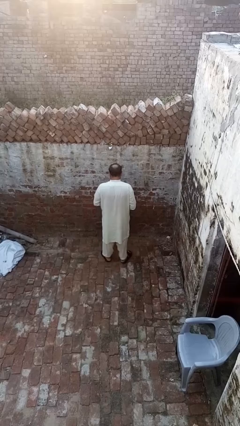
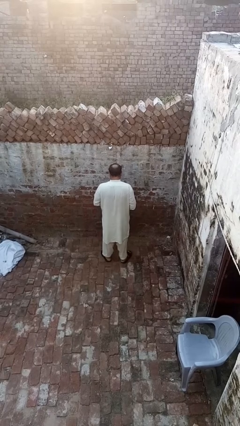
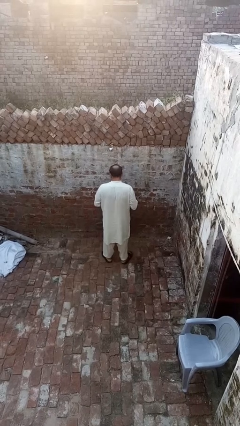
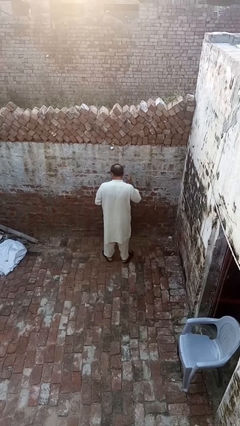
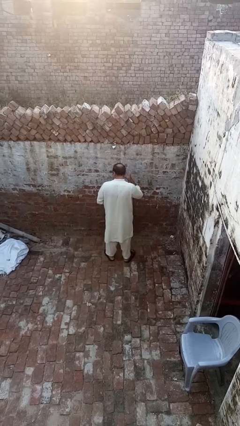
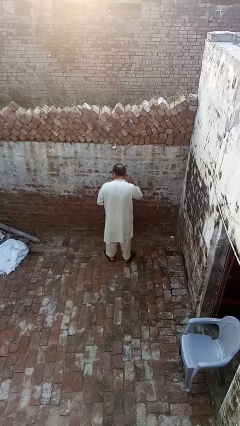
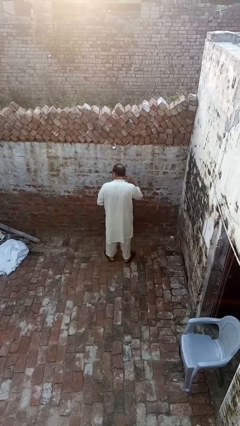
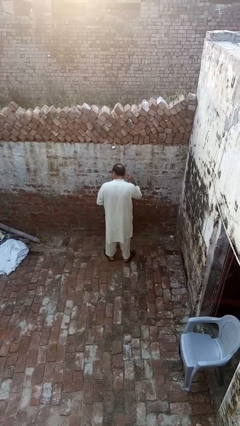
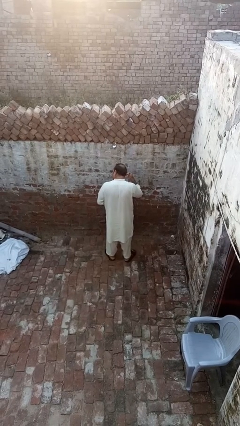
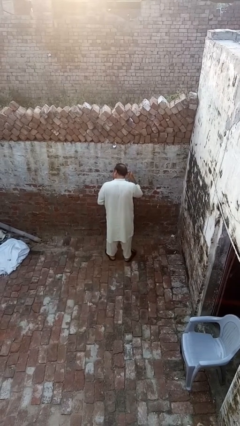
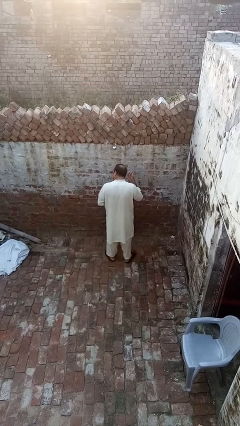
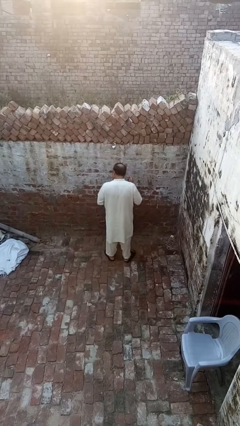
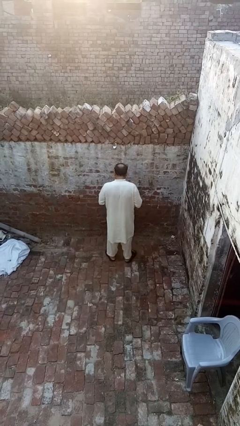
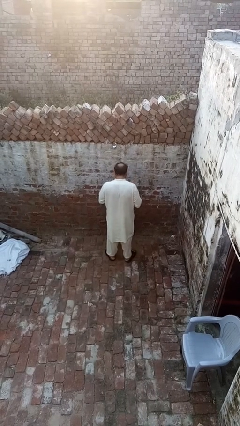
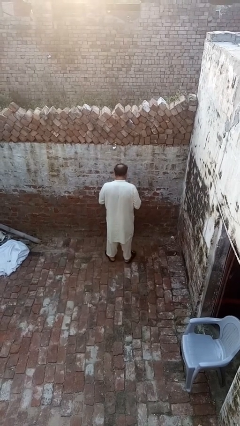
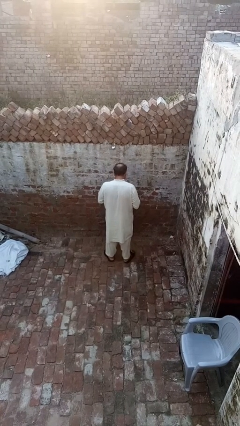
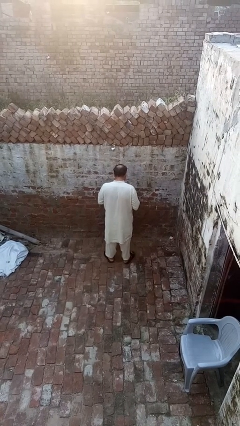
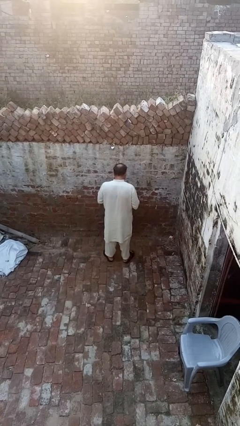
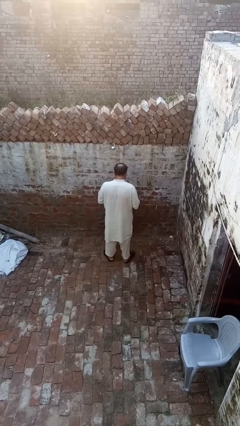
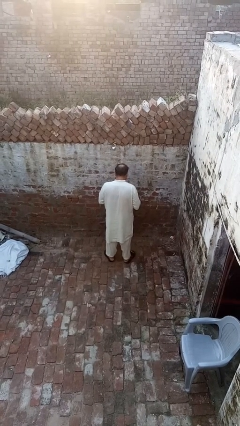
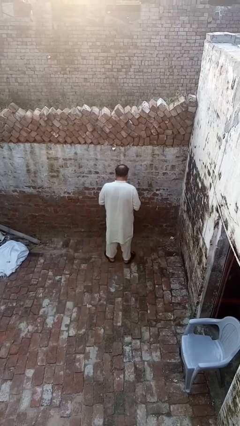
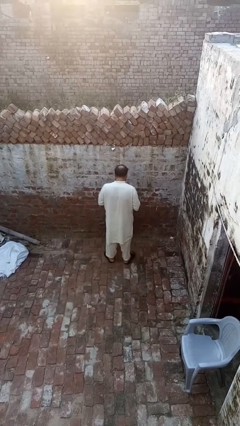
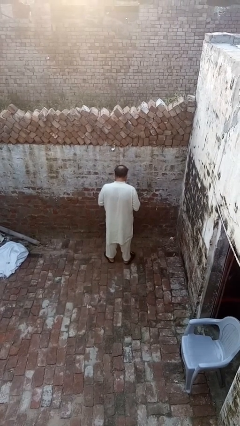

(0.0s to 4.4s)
person takes off earrings

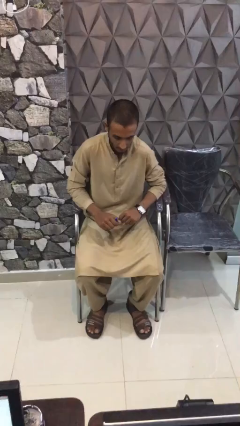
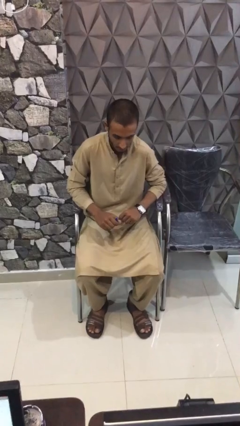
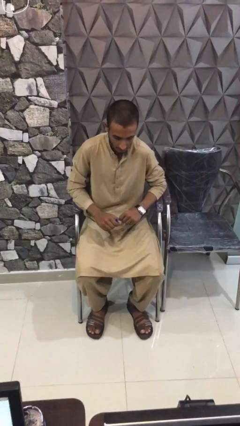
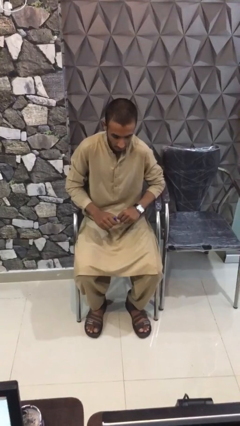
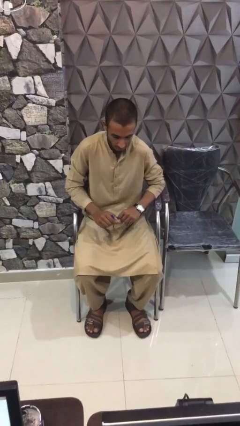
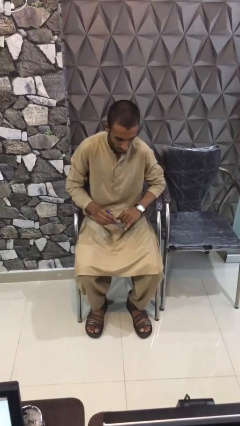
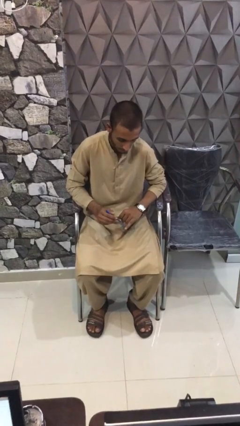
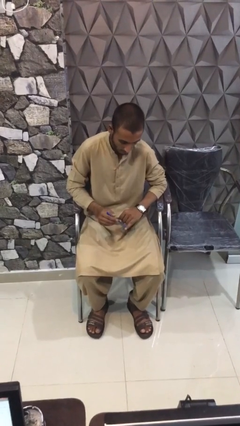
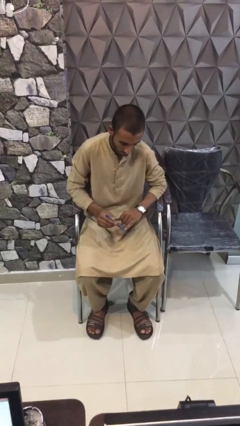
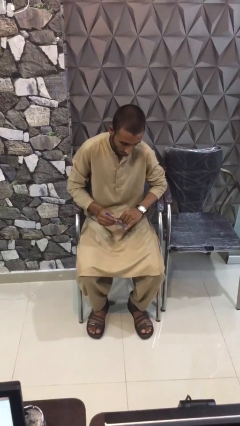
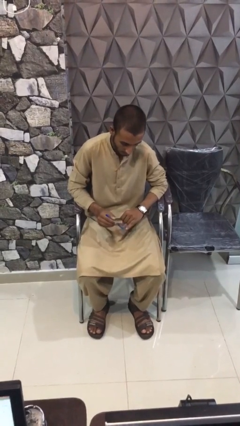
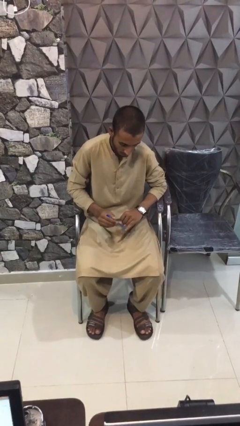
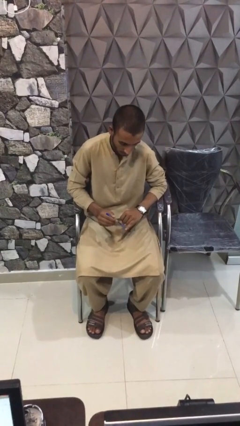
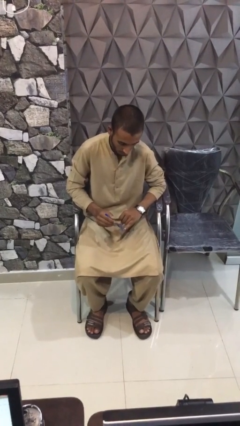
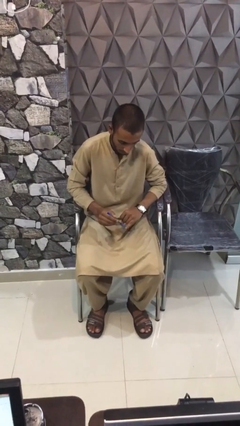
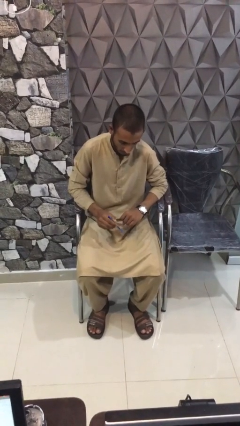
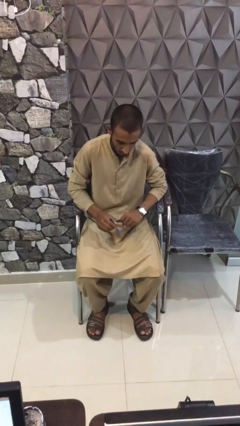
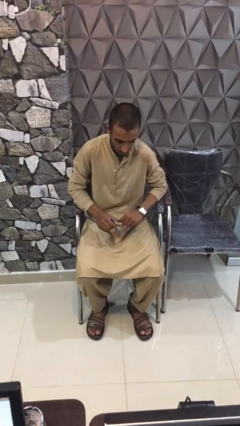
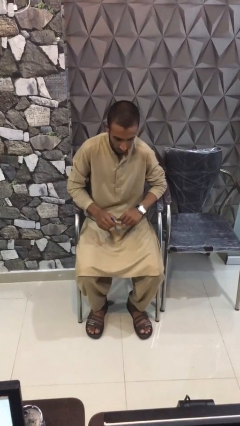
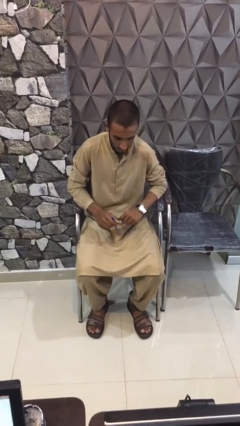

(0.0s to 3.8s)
person paints fingernails

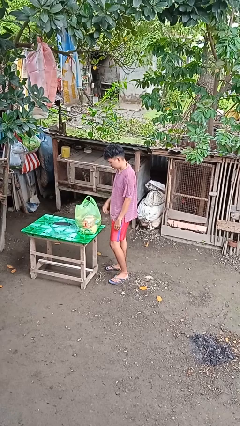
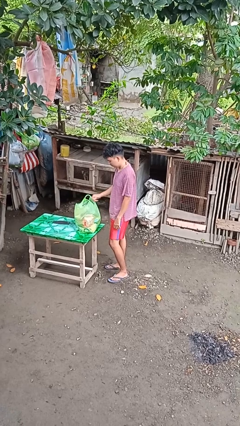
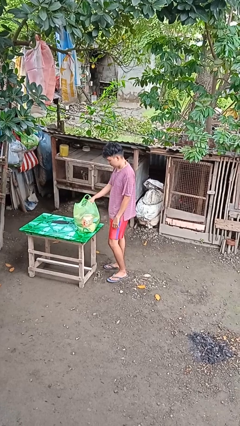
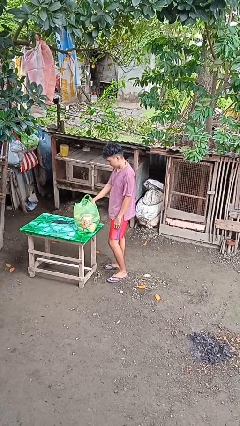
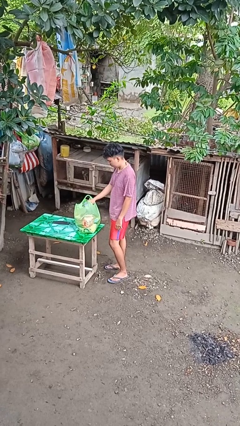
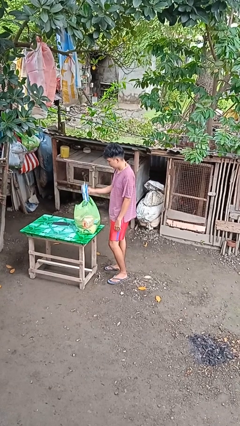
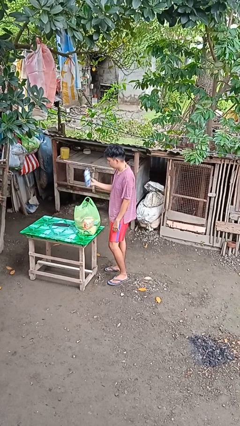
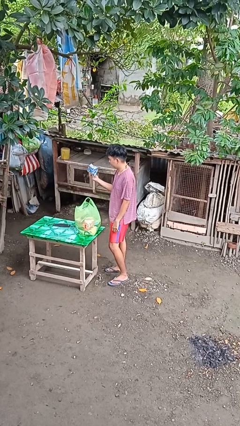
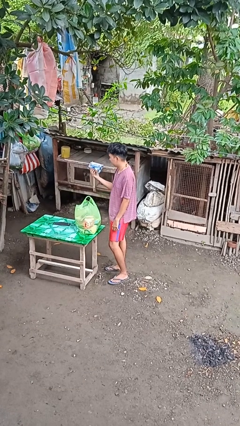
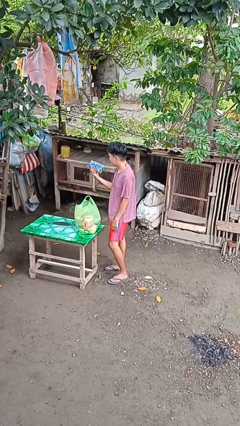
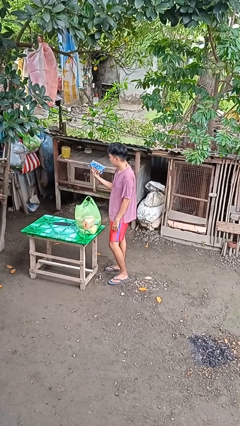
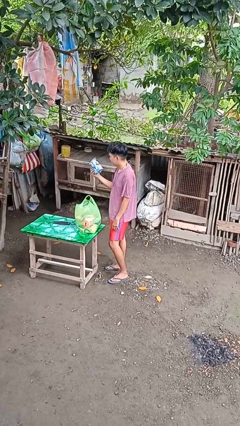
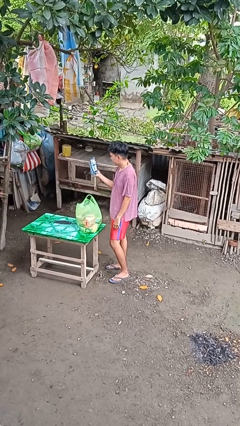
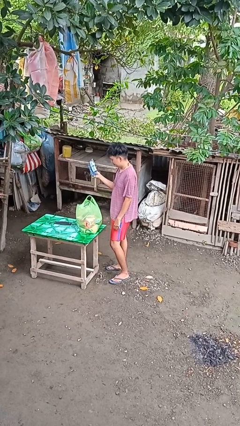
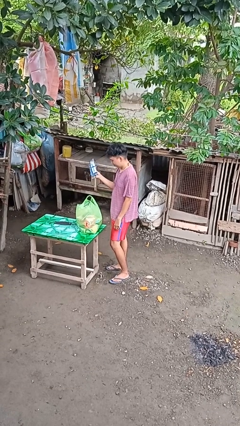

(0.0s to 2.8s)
person takes object from bag

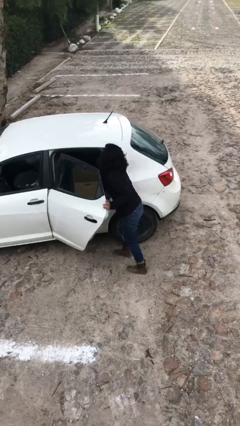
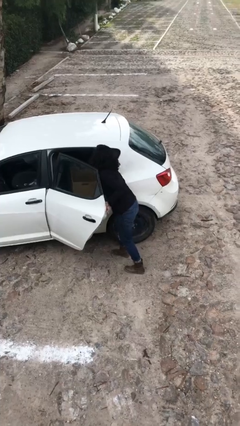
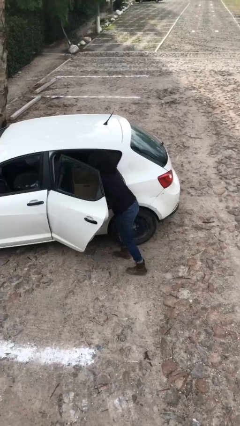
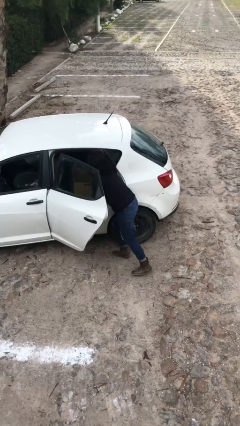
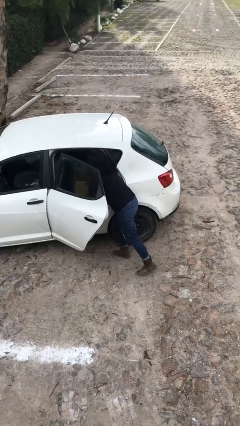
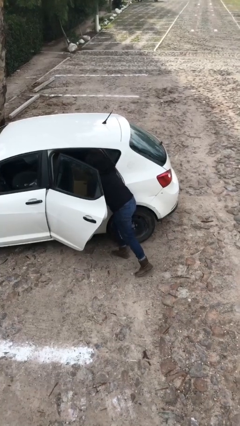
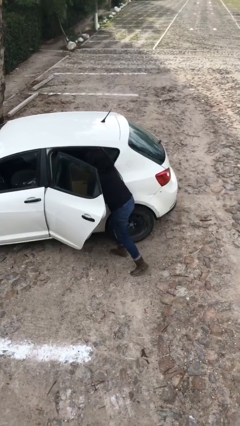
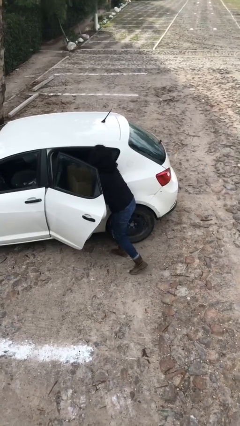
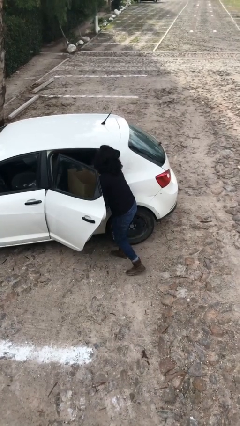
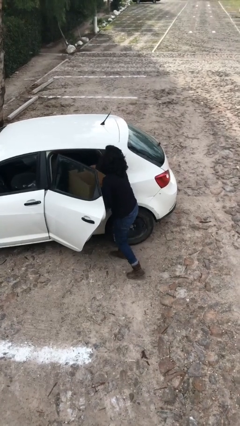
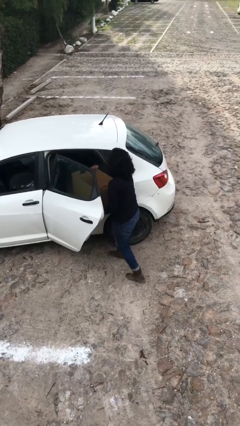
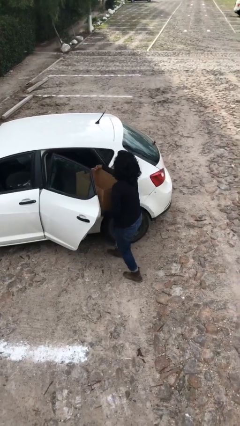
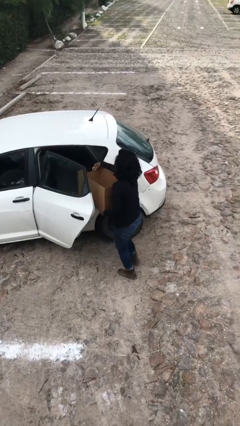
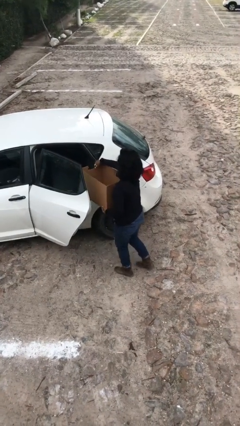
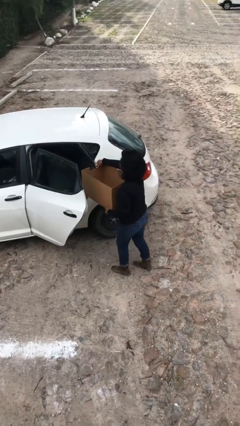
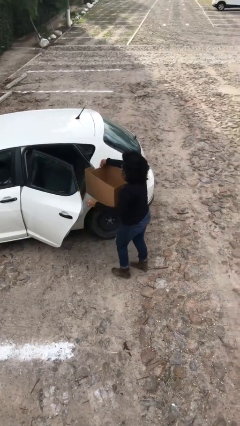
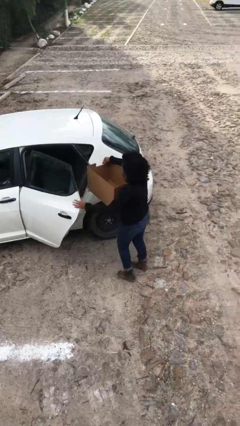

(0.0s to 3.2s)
person unloads car

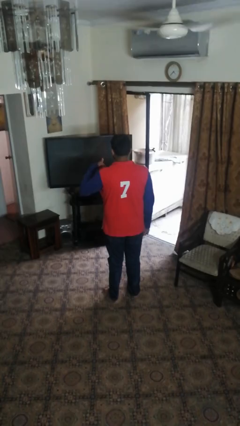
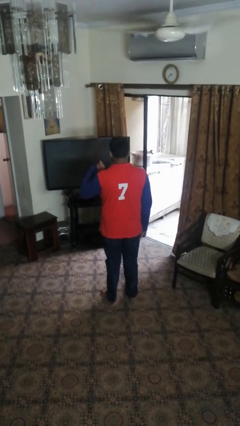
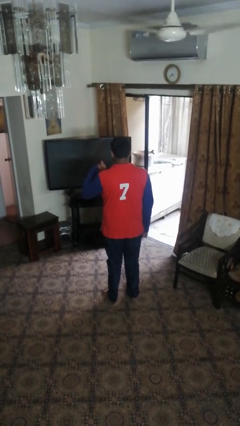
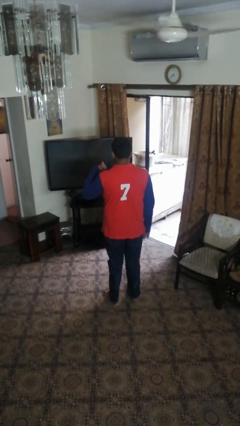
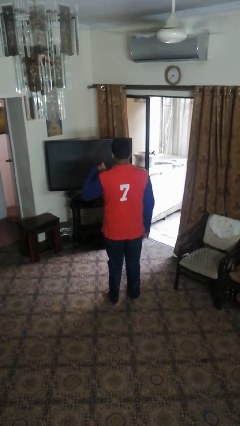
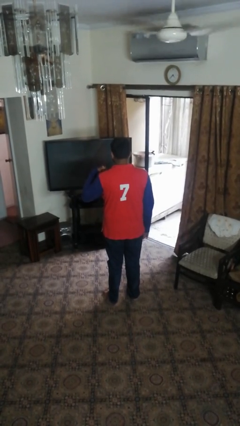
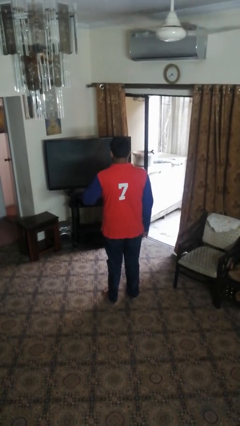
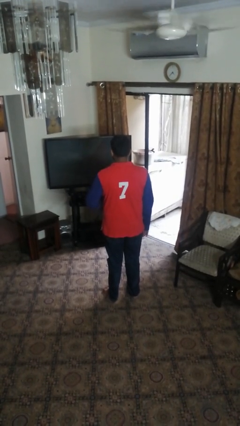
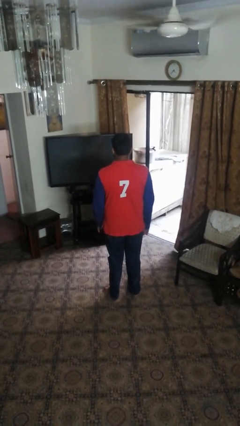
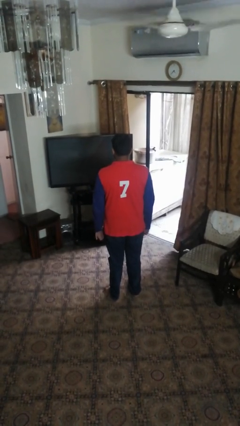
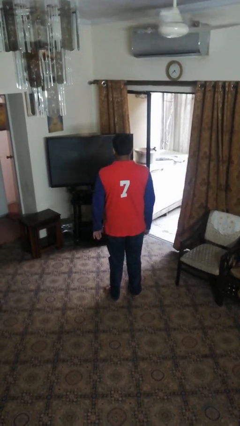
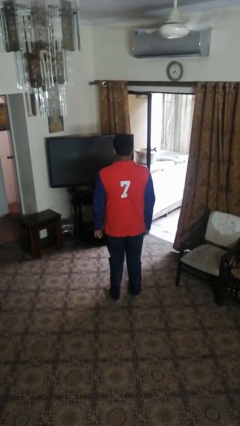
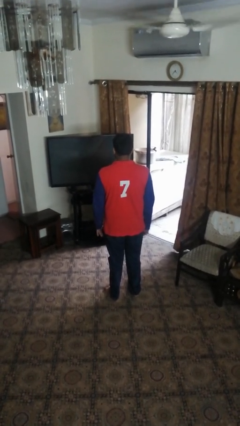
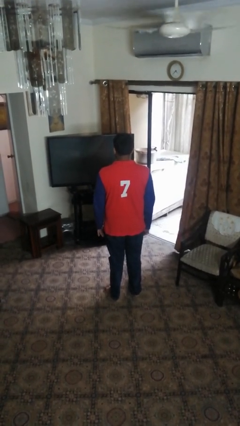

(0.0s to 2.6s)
person gestures hang loose

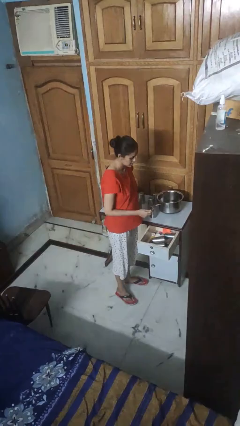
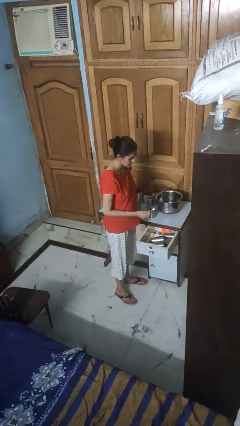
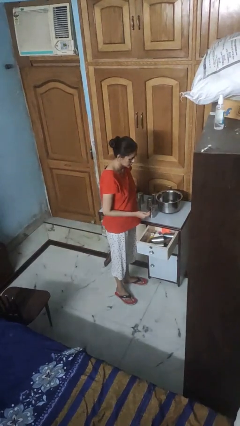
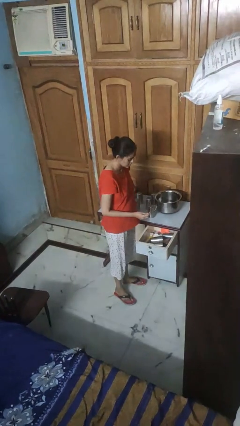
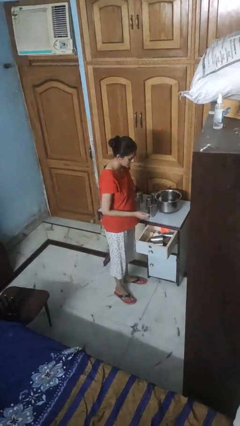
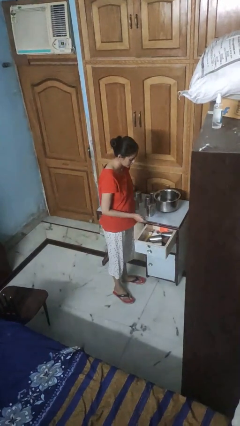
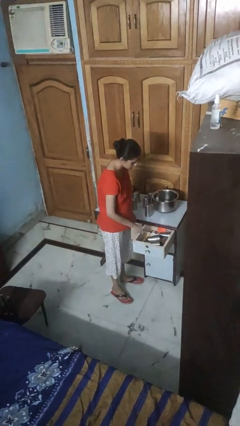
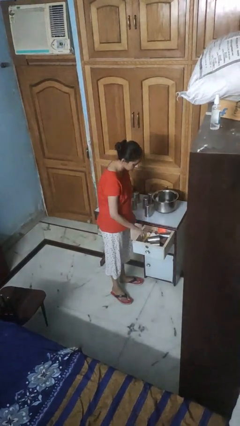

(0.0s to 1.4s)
person takes object from kitchen drawer
